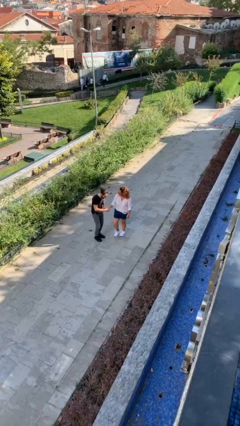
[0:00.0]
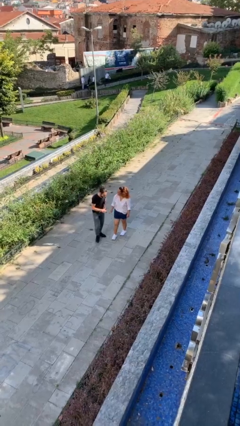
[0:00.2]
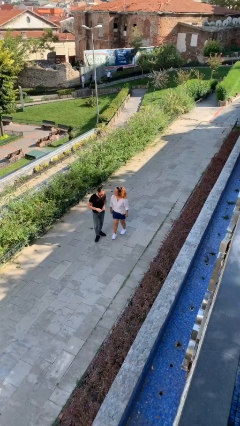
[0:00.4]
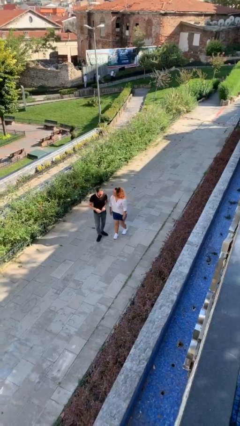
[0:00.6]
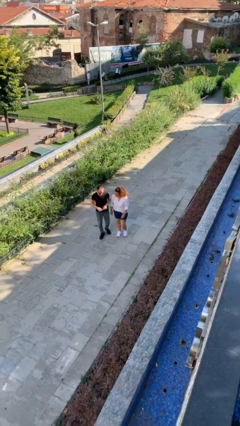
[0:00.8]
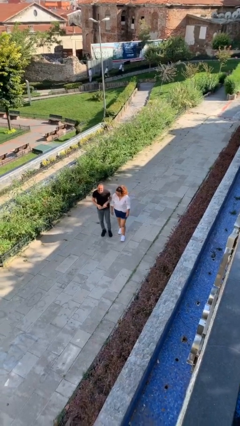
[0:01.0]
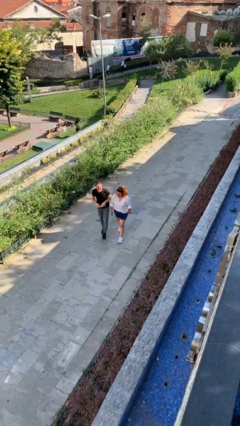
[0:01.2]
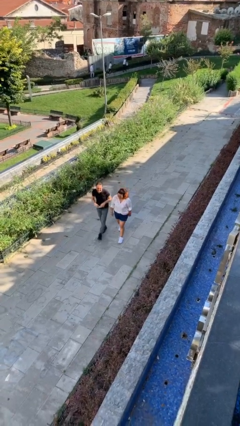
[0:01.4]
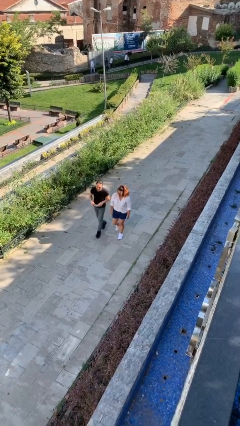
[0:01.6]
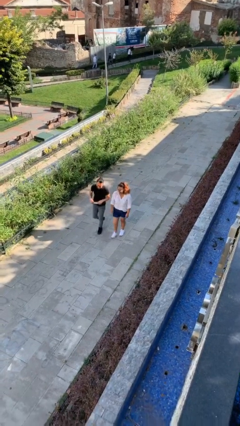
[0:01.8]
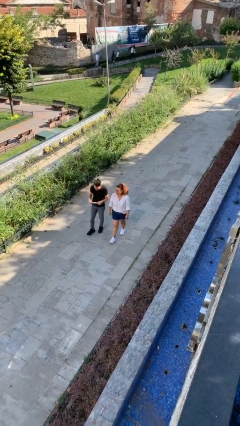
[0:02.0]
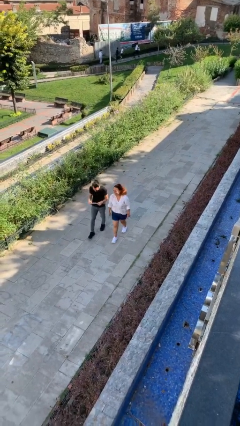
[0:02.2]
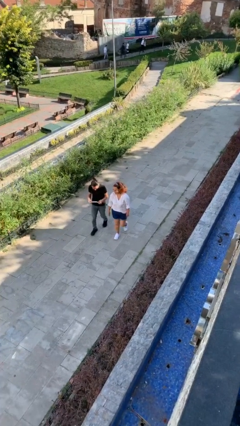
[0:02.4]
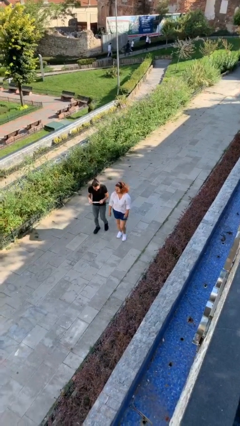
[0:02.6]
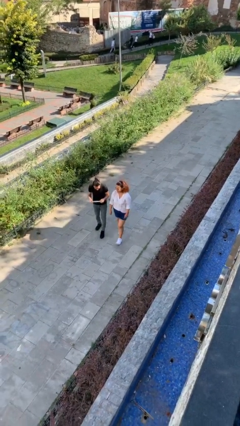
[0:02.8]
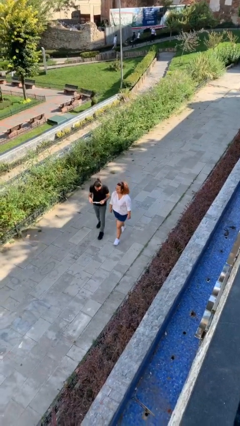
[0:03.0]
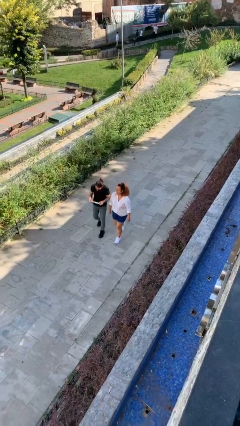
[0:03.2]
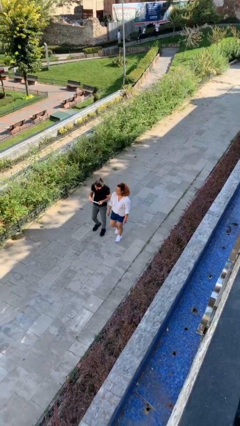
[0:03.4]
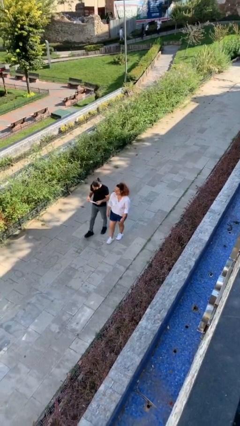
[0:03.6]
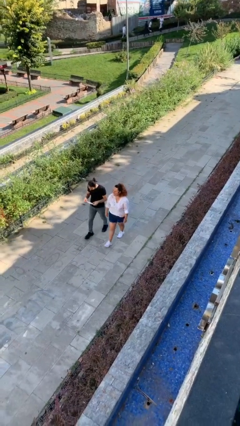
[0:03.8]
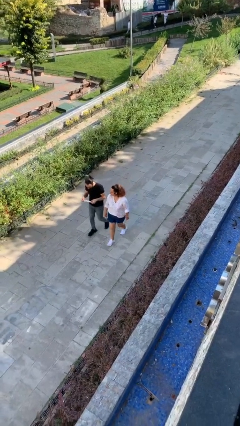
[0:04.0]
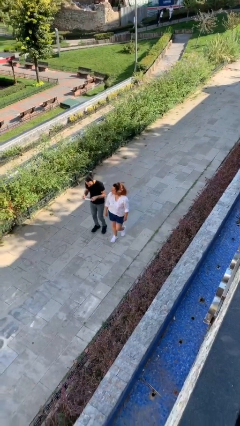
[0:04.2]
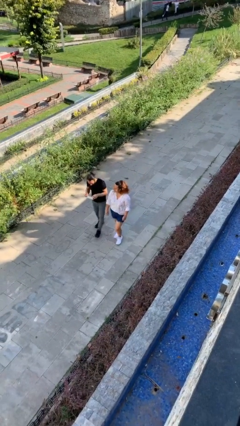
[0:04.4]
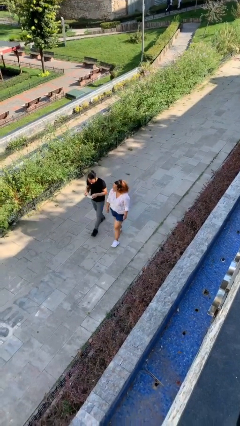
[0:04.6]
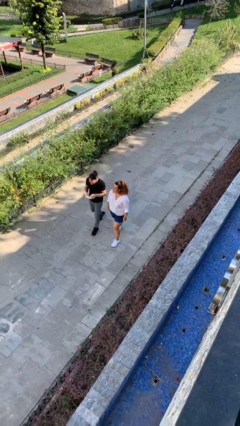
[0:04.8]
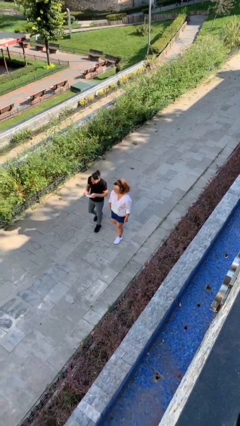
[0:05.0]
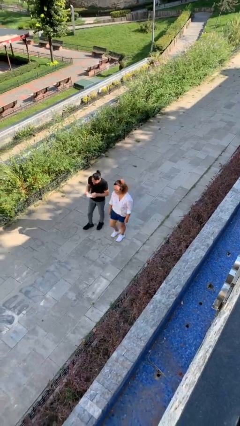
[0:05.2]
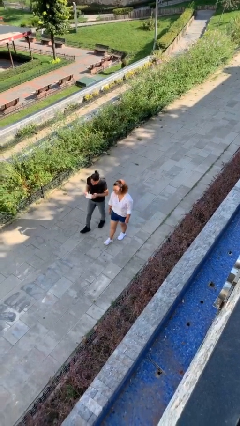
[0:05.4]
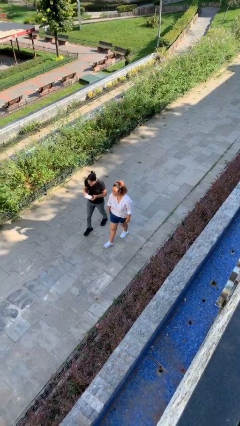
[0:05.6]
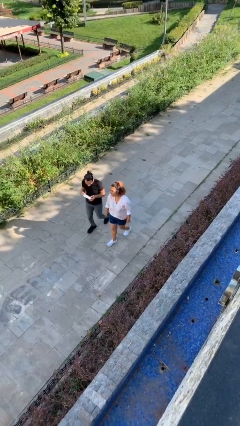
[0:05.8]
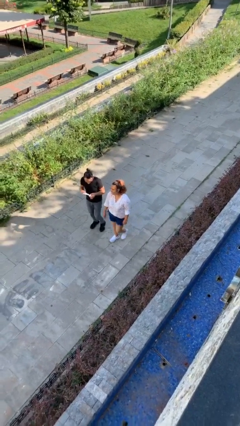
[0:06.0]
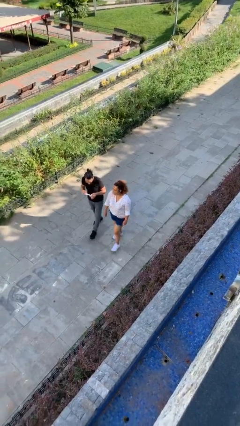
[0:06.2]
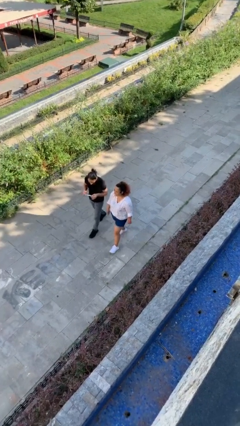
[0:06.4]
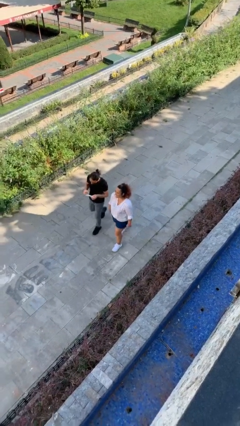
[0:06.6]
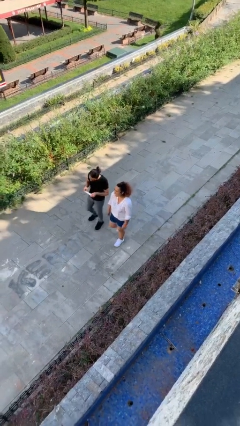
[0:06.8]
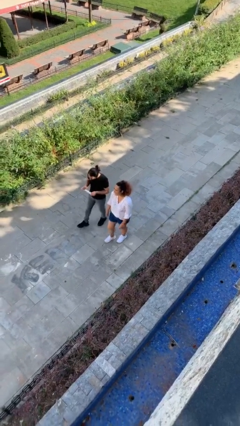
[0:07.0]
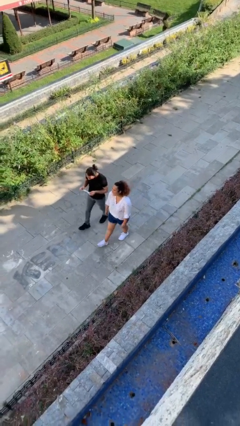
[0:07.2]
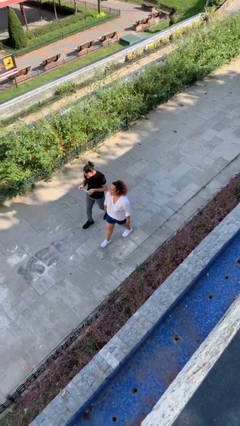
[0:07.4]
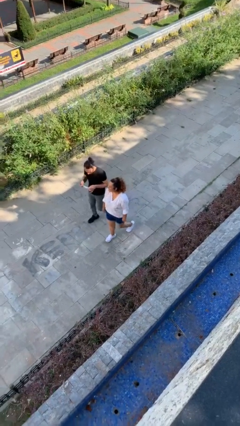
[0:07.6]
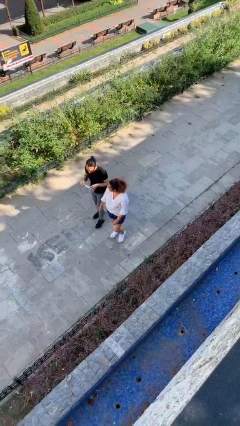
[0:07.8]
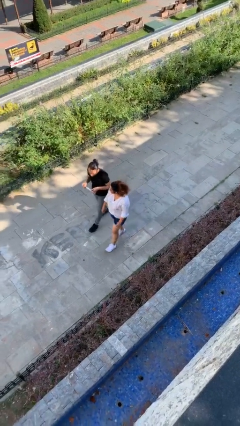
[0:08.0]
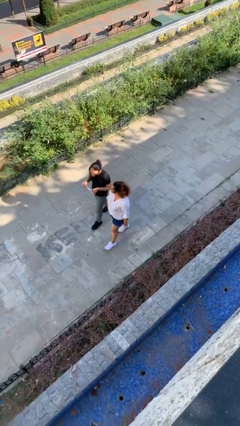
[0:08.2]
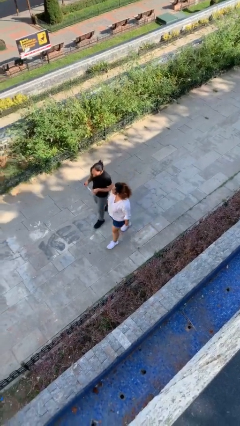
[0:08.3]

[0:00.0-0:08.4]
person talks to person

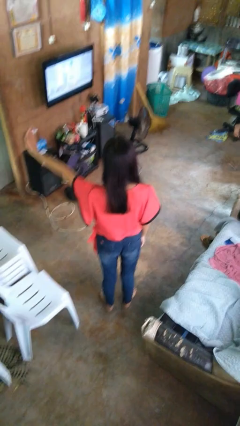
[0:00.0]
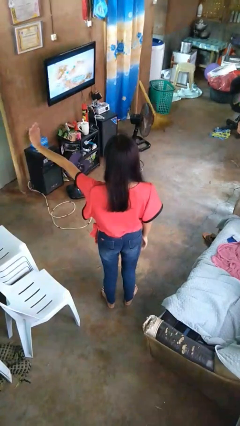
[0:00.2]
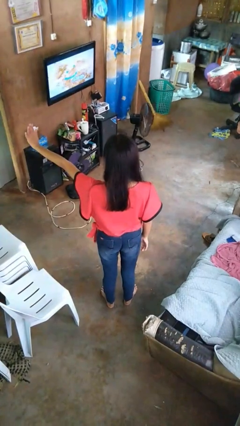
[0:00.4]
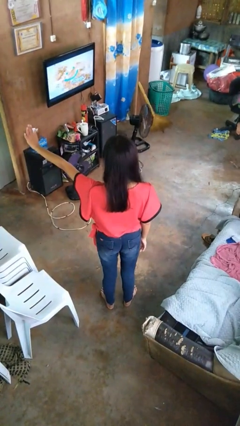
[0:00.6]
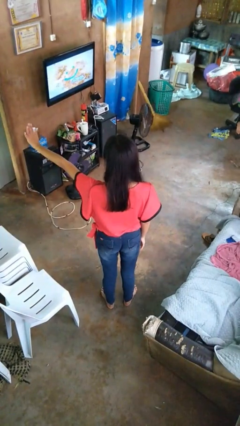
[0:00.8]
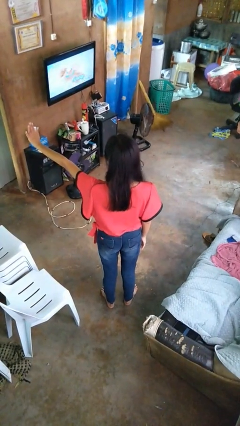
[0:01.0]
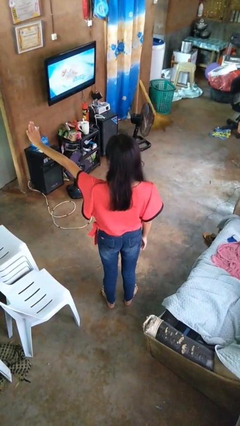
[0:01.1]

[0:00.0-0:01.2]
person gestures stop

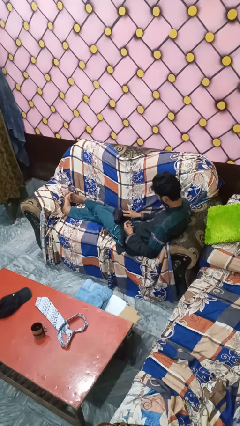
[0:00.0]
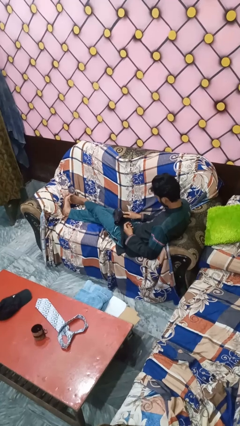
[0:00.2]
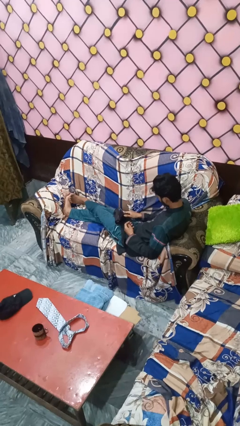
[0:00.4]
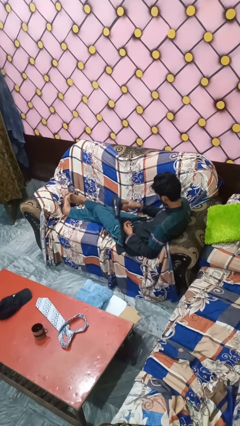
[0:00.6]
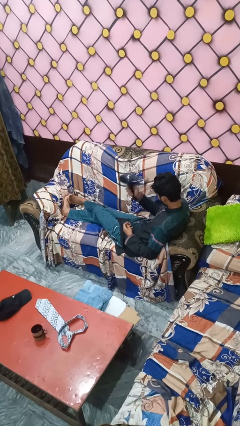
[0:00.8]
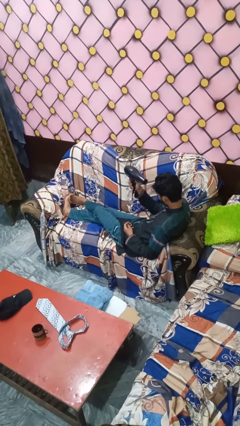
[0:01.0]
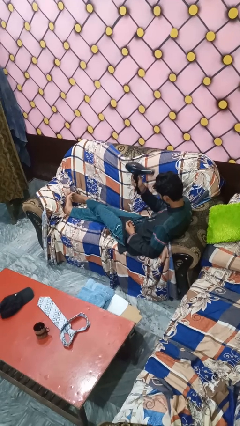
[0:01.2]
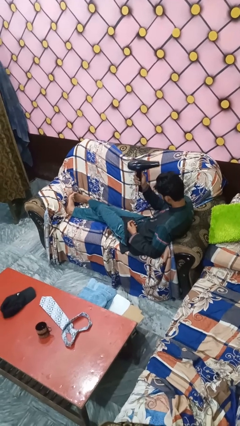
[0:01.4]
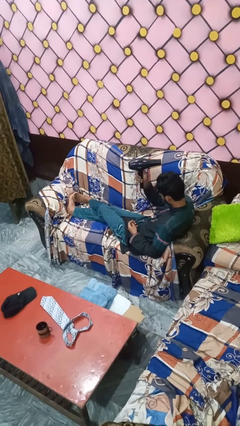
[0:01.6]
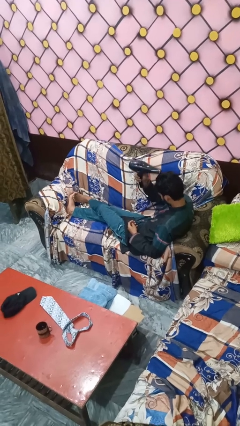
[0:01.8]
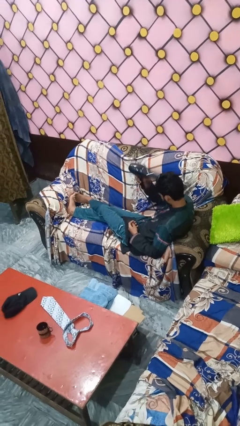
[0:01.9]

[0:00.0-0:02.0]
person dries hair with hairdryer

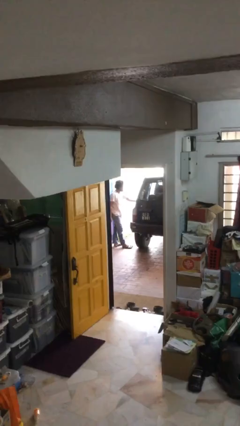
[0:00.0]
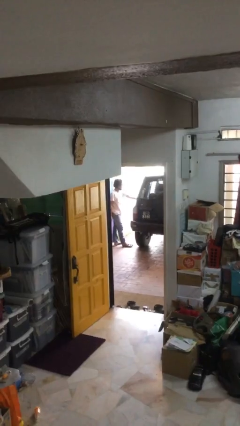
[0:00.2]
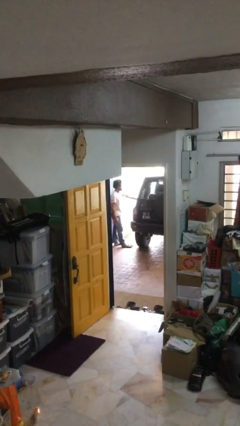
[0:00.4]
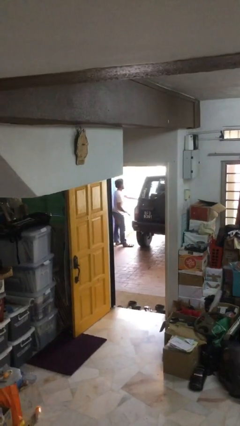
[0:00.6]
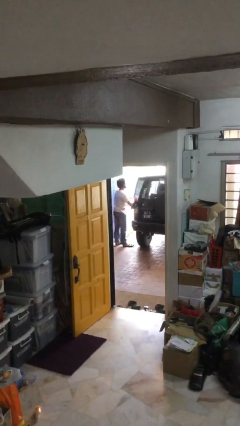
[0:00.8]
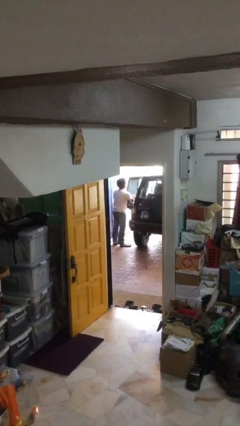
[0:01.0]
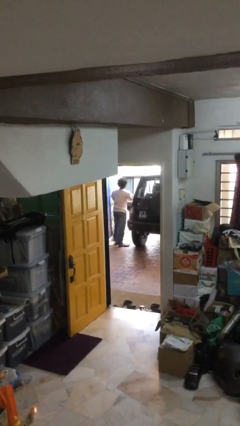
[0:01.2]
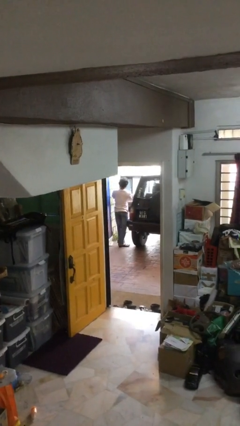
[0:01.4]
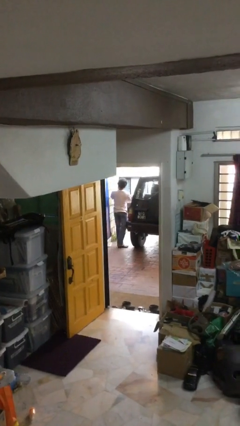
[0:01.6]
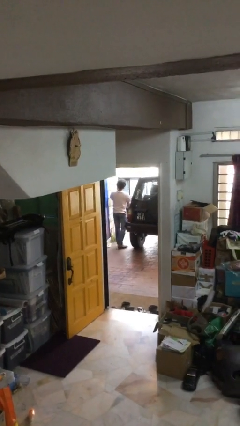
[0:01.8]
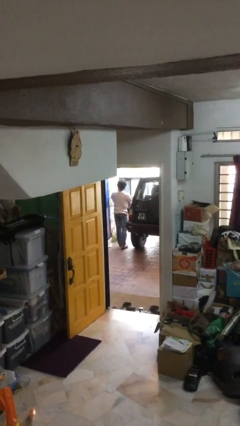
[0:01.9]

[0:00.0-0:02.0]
person opens car door

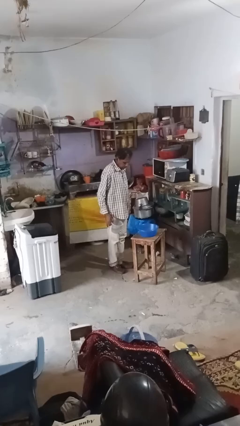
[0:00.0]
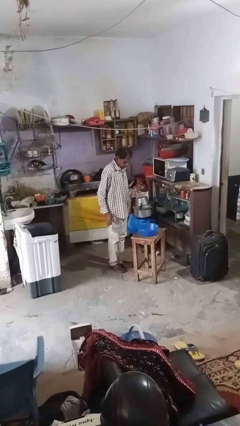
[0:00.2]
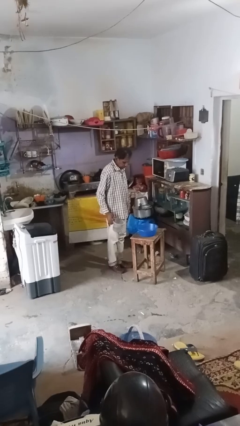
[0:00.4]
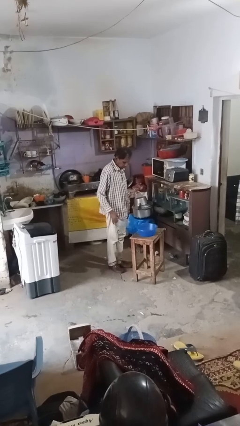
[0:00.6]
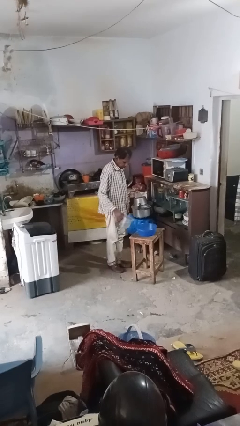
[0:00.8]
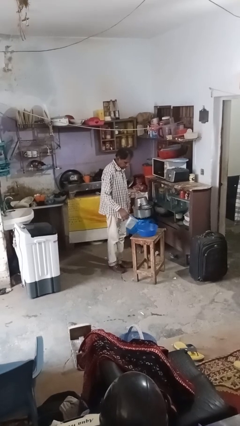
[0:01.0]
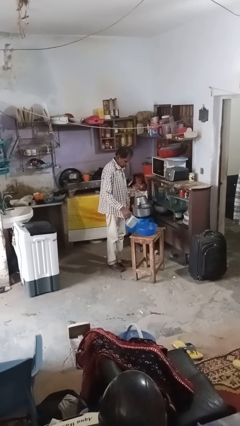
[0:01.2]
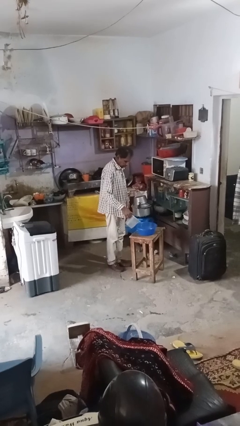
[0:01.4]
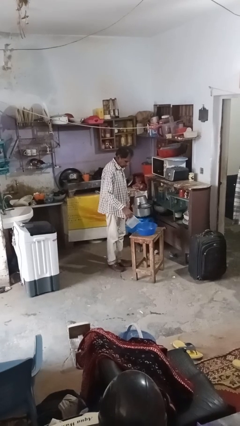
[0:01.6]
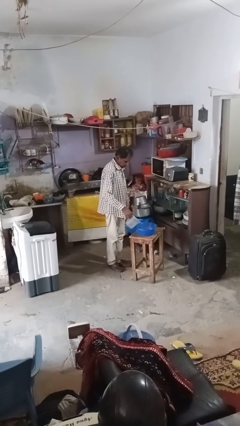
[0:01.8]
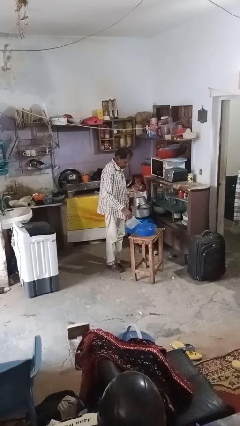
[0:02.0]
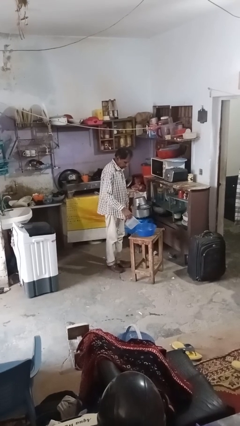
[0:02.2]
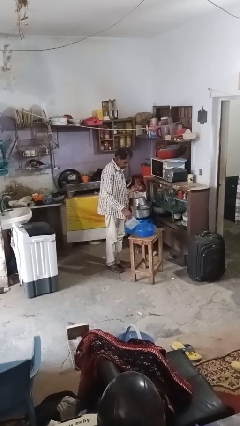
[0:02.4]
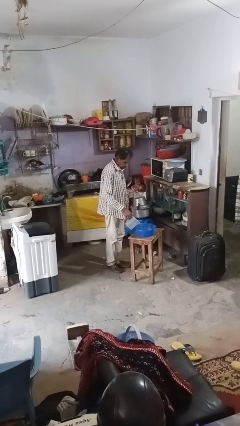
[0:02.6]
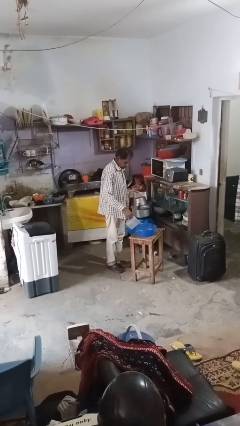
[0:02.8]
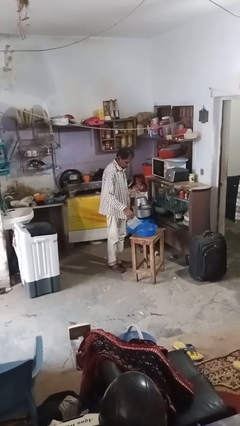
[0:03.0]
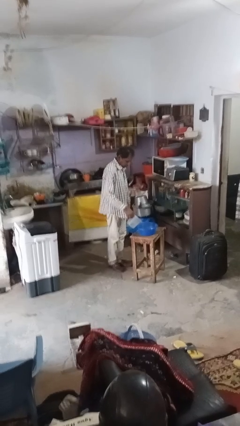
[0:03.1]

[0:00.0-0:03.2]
person pours into bowl

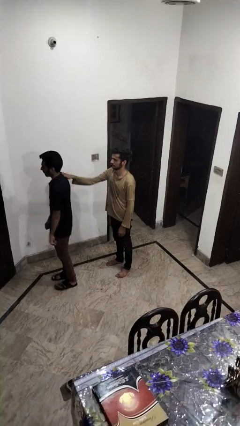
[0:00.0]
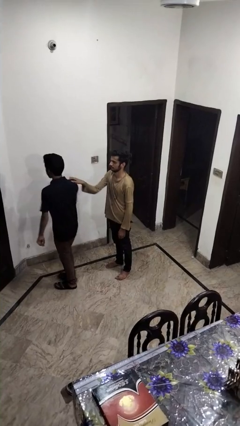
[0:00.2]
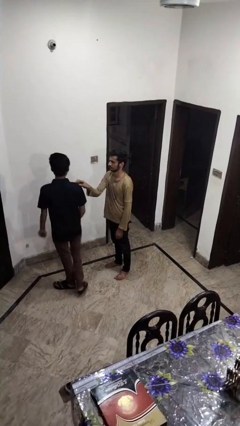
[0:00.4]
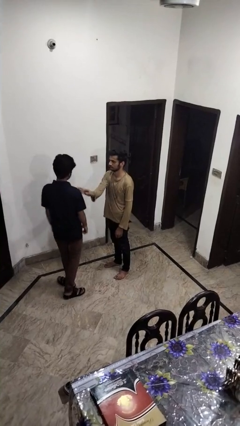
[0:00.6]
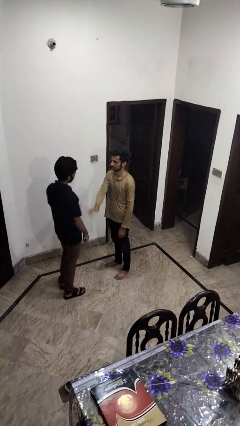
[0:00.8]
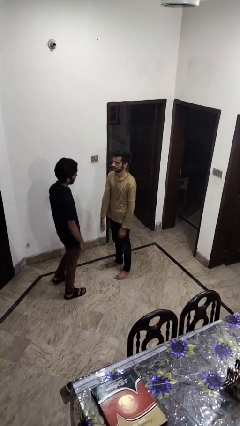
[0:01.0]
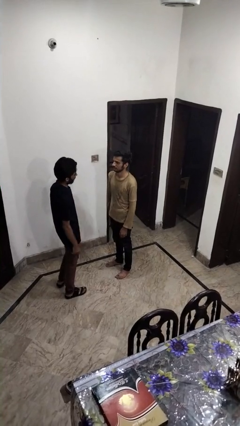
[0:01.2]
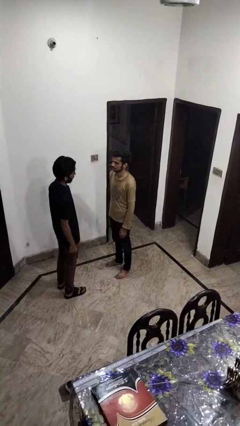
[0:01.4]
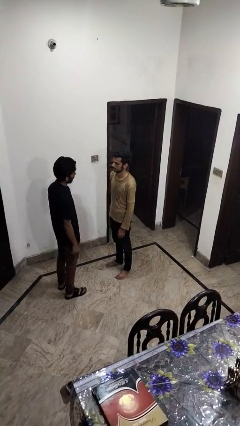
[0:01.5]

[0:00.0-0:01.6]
person spins person around
